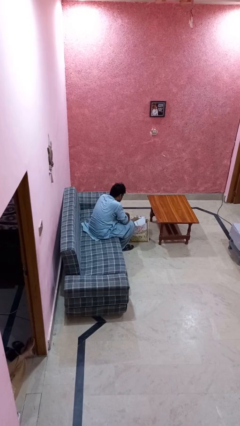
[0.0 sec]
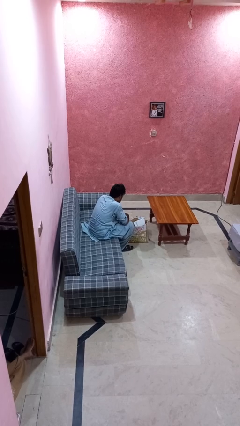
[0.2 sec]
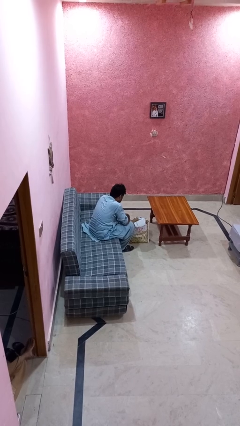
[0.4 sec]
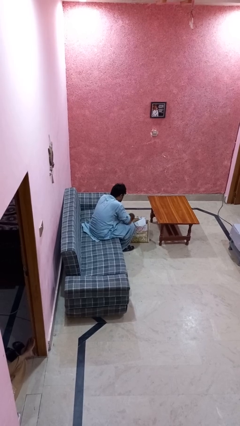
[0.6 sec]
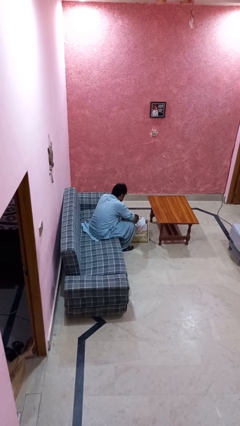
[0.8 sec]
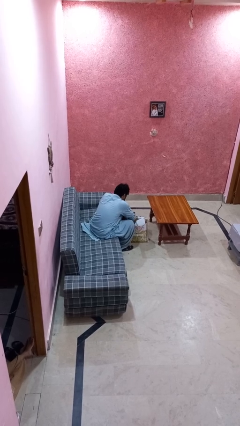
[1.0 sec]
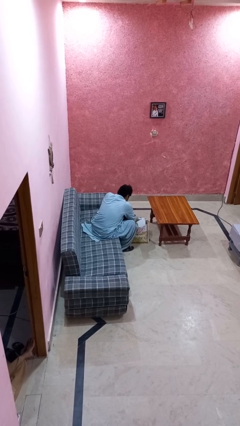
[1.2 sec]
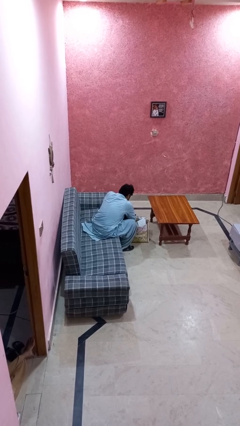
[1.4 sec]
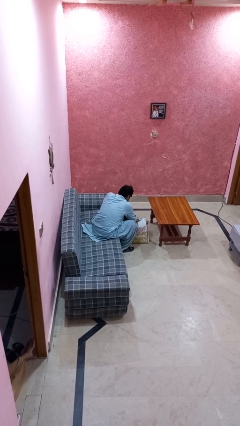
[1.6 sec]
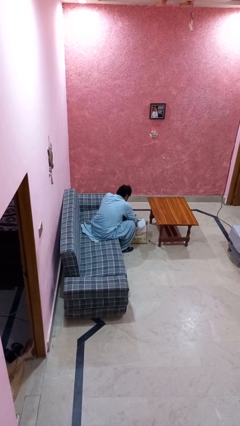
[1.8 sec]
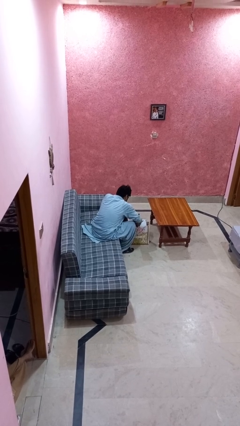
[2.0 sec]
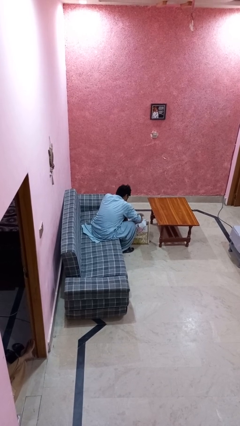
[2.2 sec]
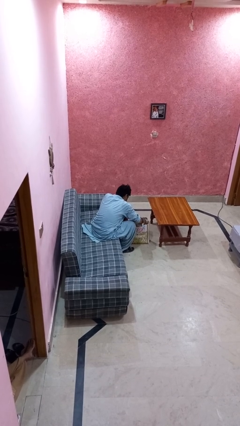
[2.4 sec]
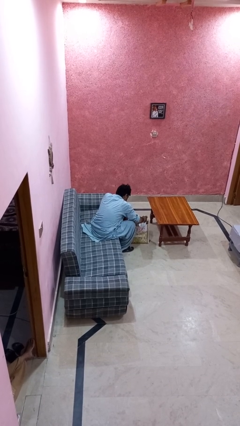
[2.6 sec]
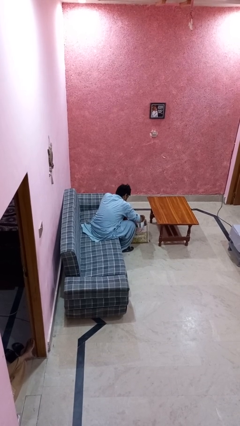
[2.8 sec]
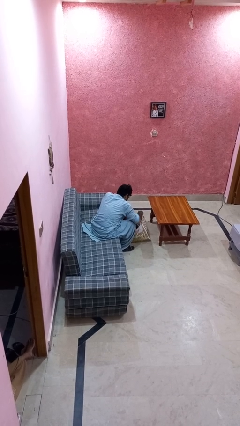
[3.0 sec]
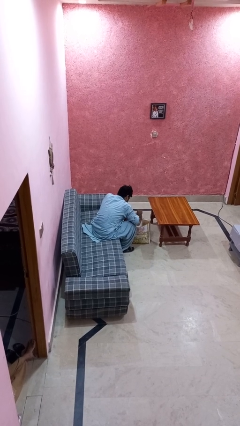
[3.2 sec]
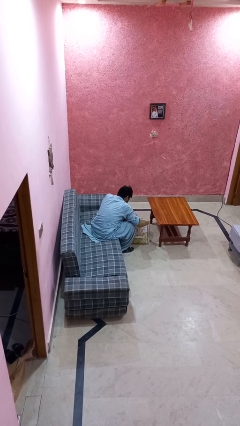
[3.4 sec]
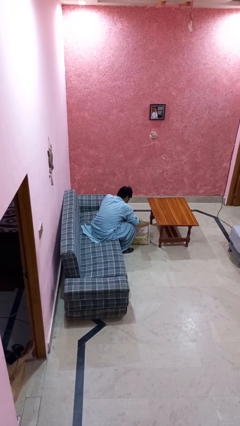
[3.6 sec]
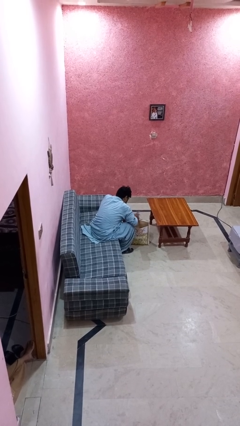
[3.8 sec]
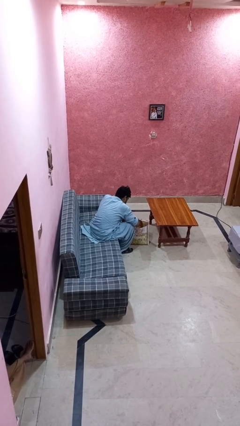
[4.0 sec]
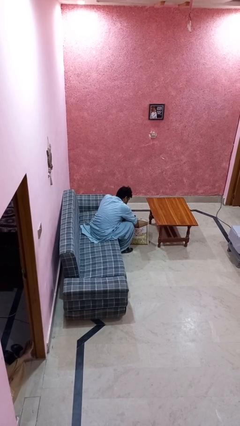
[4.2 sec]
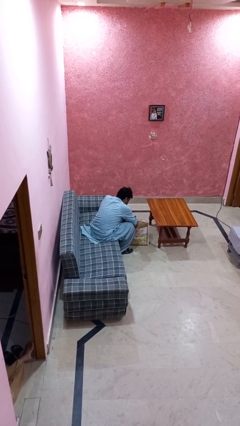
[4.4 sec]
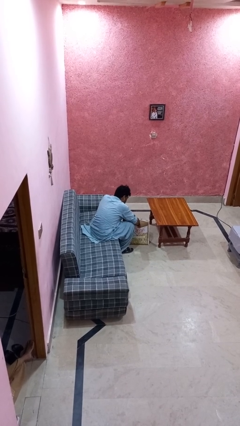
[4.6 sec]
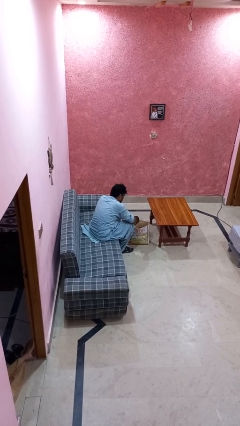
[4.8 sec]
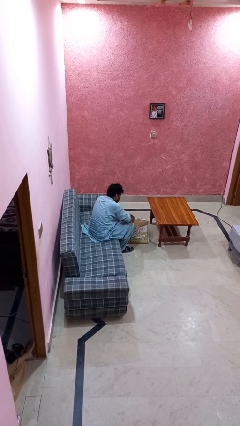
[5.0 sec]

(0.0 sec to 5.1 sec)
person searches in bag

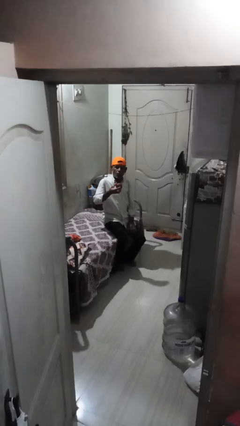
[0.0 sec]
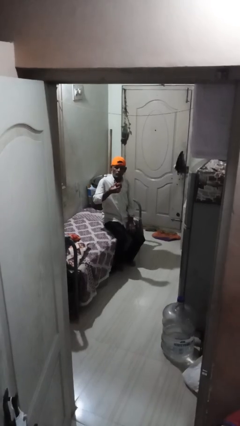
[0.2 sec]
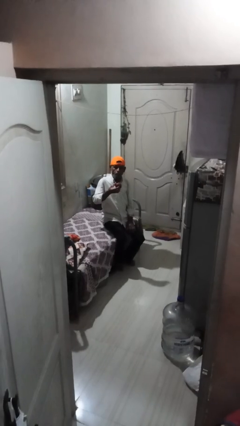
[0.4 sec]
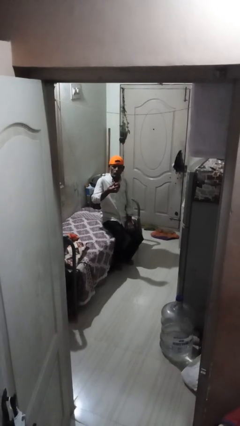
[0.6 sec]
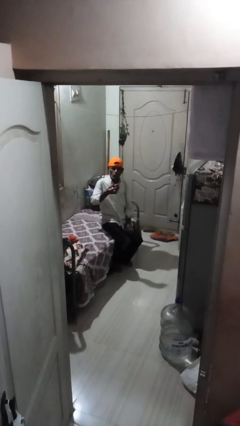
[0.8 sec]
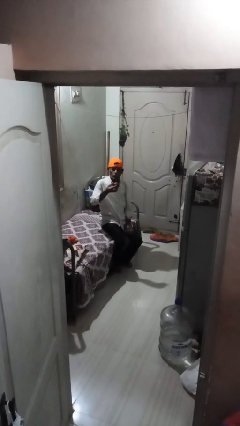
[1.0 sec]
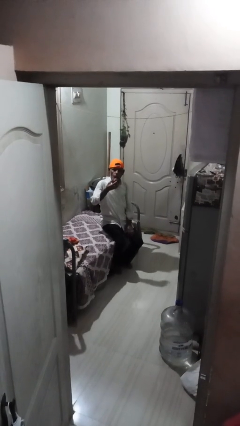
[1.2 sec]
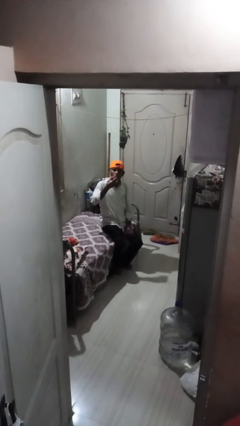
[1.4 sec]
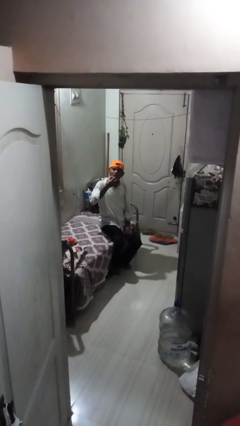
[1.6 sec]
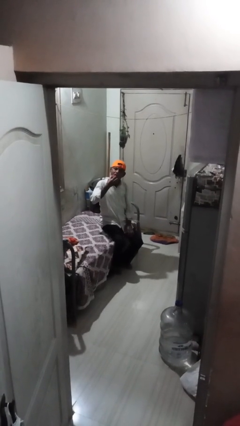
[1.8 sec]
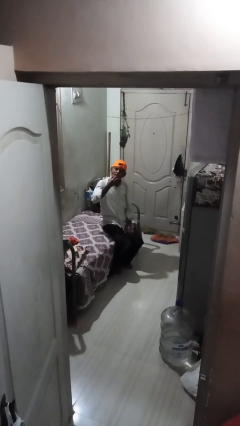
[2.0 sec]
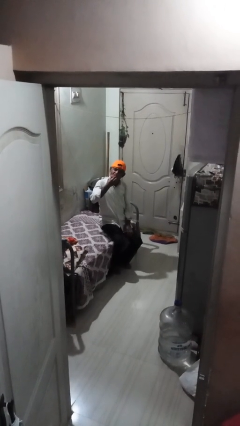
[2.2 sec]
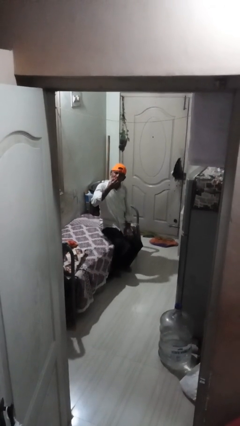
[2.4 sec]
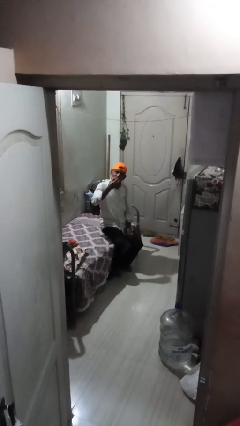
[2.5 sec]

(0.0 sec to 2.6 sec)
person eats apple

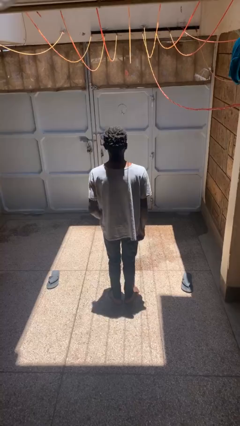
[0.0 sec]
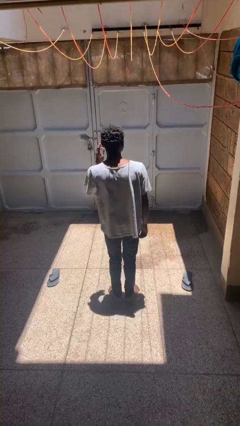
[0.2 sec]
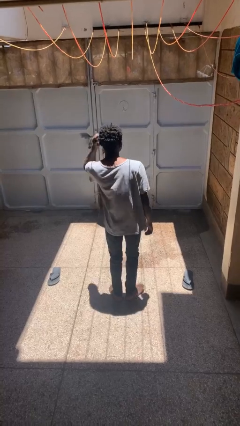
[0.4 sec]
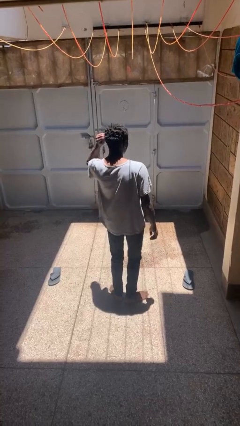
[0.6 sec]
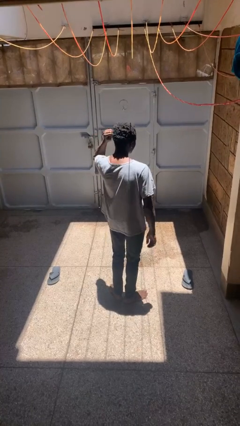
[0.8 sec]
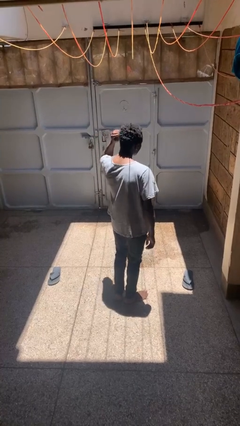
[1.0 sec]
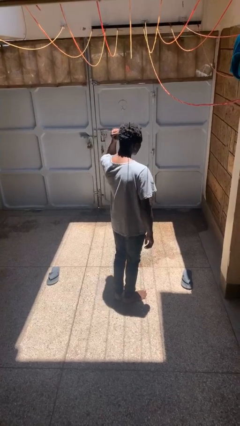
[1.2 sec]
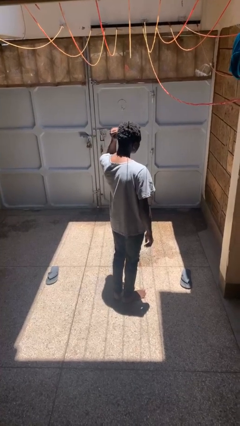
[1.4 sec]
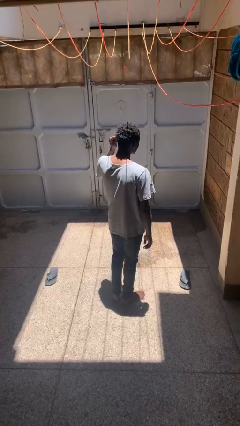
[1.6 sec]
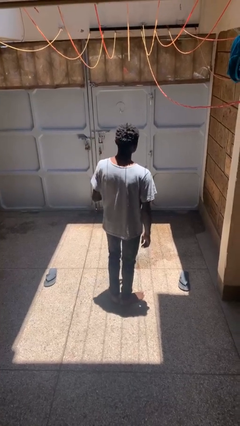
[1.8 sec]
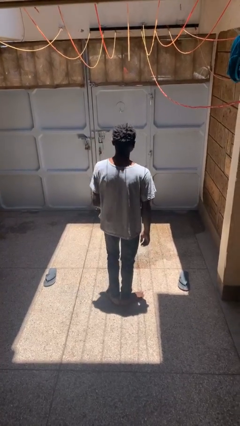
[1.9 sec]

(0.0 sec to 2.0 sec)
person touches earlobe

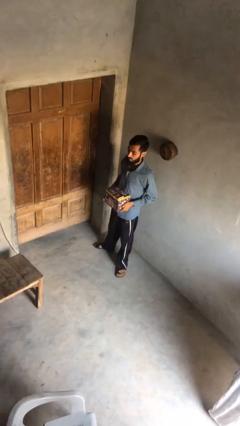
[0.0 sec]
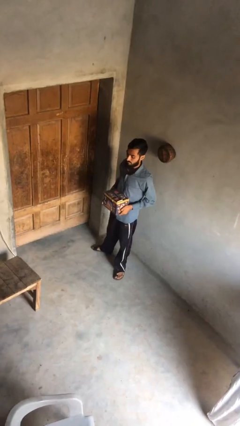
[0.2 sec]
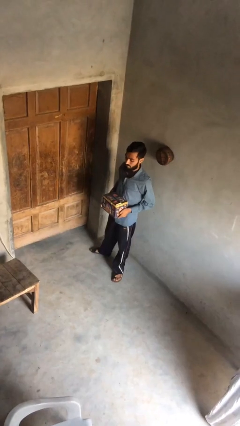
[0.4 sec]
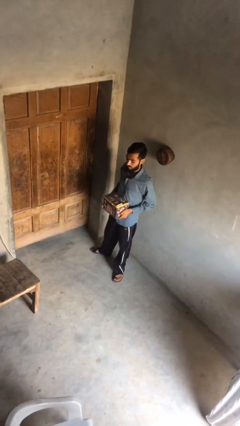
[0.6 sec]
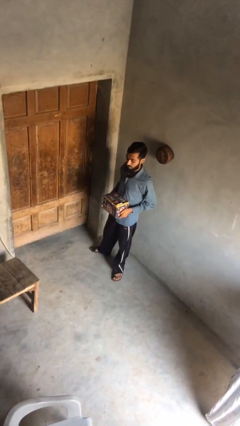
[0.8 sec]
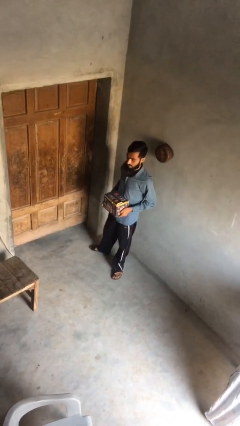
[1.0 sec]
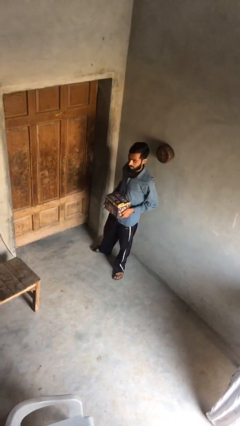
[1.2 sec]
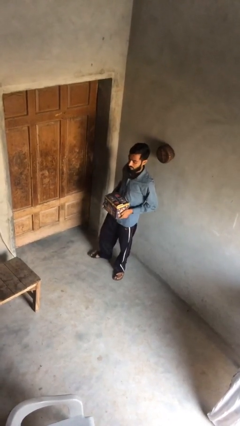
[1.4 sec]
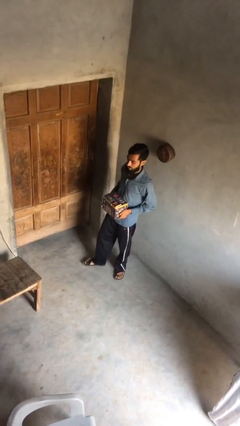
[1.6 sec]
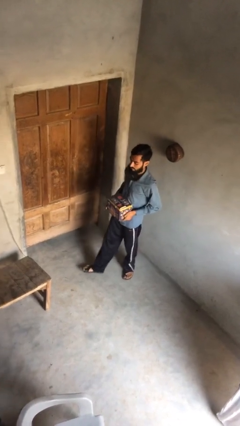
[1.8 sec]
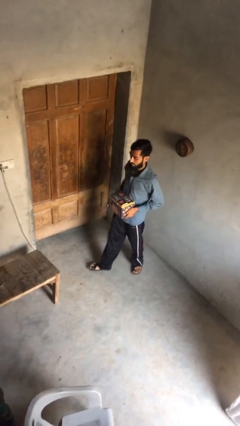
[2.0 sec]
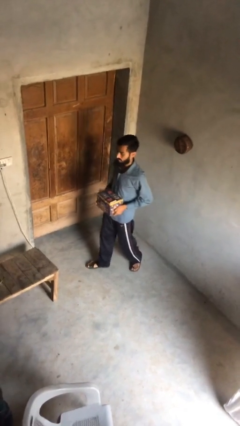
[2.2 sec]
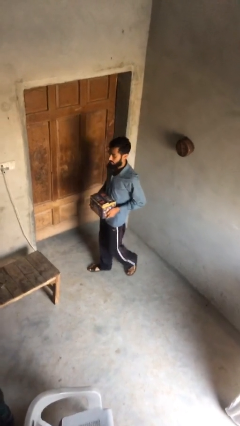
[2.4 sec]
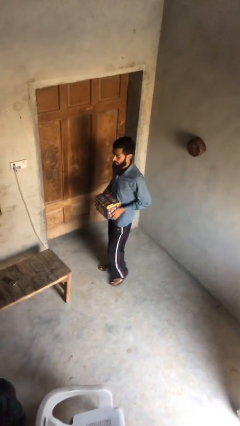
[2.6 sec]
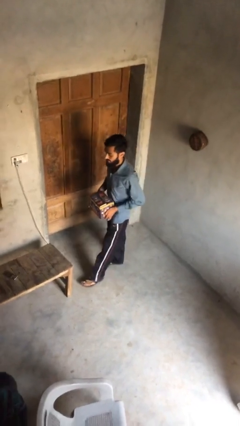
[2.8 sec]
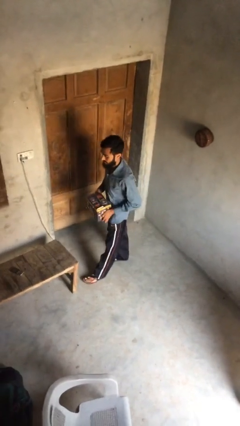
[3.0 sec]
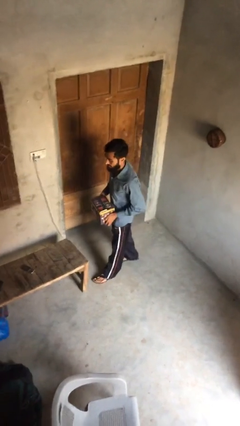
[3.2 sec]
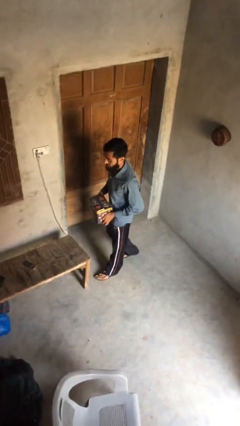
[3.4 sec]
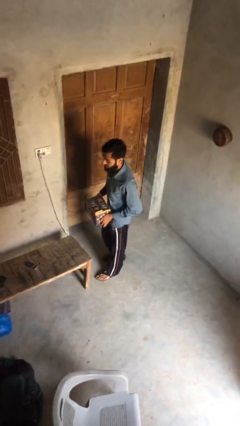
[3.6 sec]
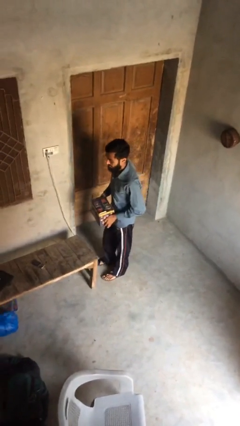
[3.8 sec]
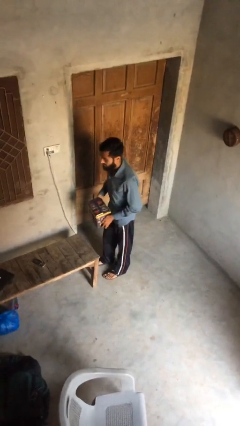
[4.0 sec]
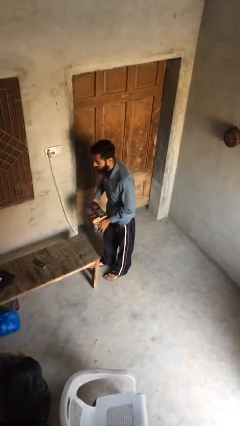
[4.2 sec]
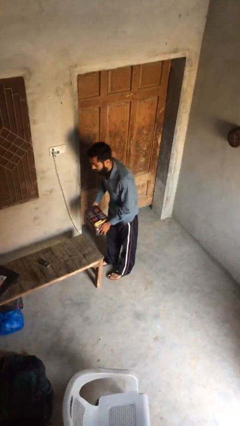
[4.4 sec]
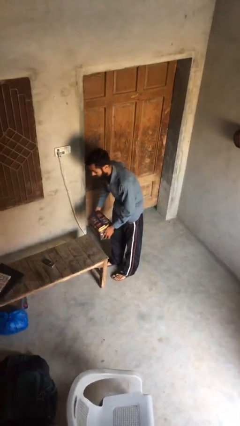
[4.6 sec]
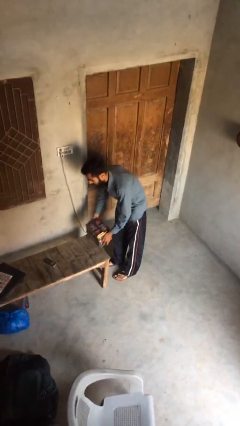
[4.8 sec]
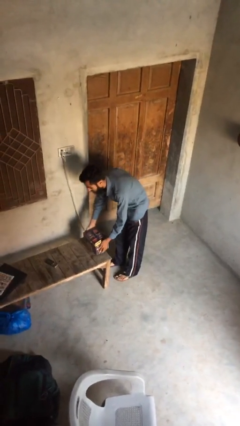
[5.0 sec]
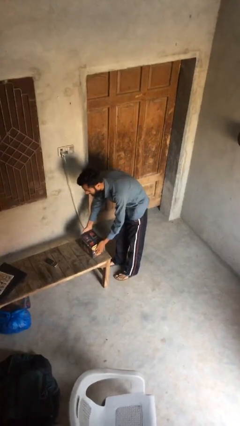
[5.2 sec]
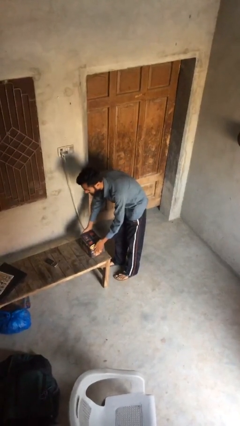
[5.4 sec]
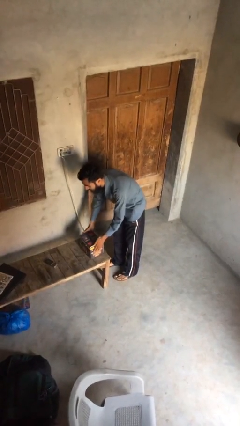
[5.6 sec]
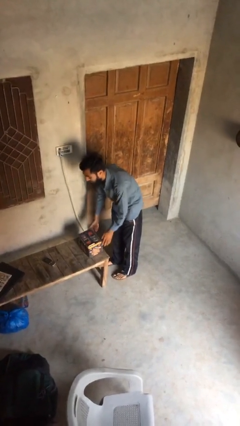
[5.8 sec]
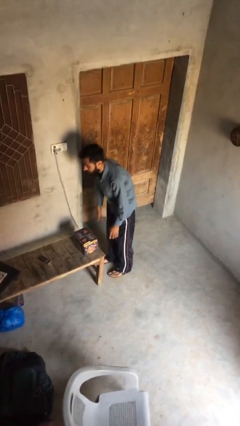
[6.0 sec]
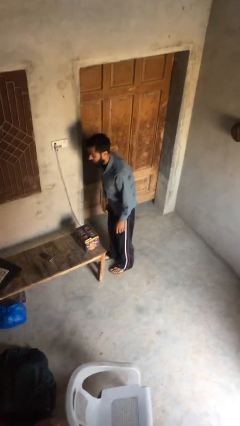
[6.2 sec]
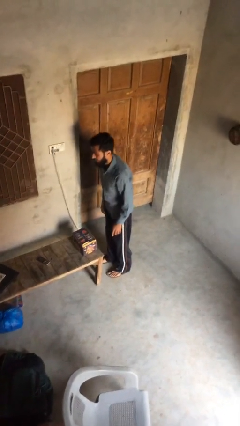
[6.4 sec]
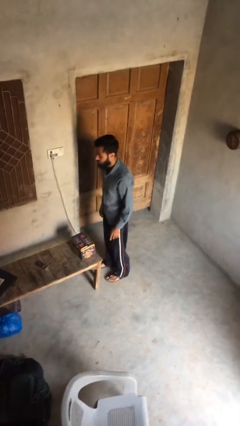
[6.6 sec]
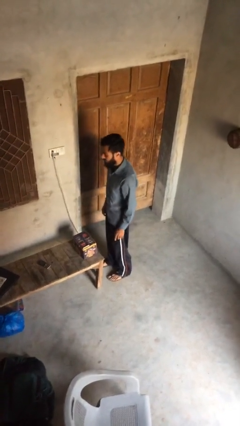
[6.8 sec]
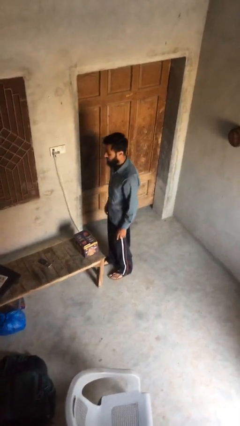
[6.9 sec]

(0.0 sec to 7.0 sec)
person puts down object on table

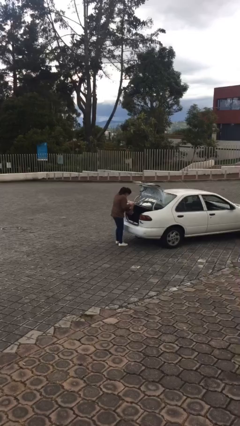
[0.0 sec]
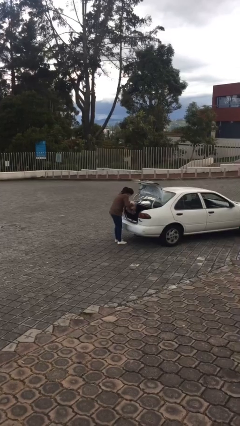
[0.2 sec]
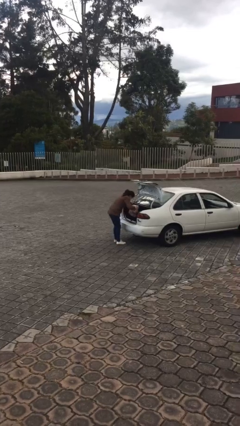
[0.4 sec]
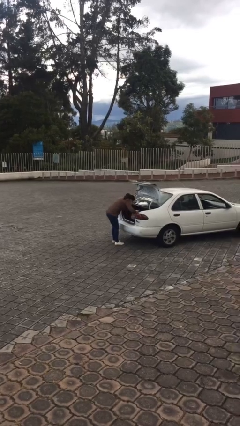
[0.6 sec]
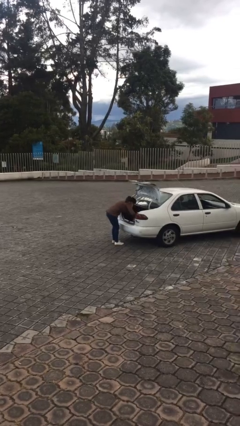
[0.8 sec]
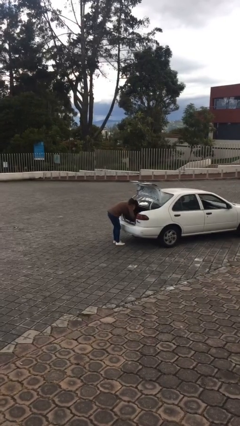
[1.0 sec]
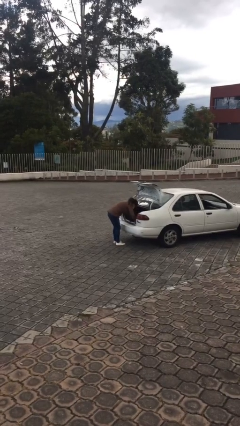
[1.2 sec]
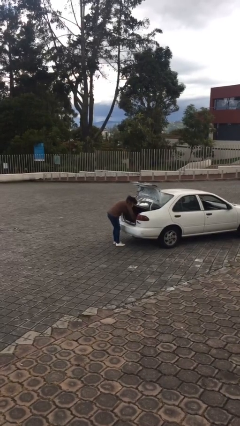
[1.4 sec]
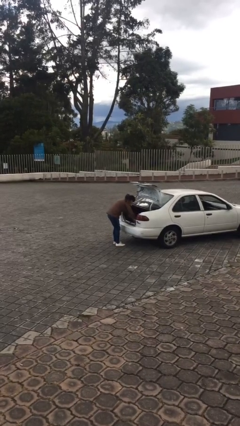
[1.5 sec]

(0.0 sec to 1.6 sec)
person loads car
